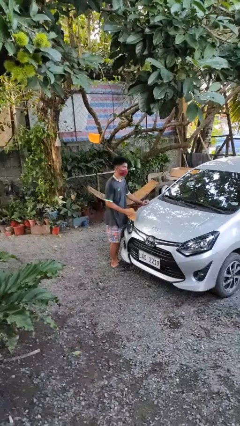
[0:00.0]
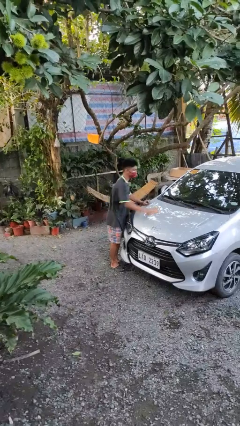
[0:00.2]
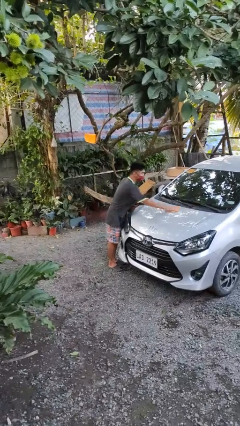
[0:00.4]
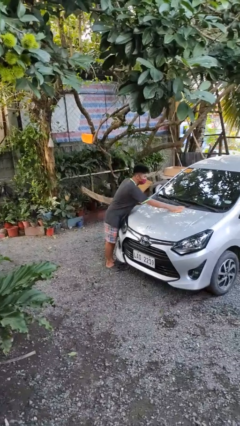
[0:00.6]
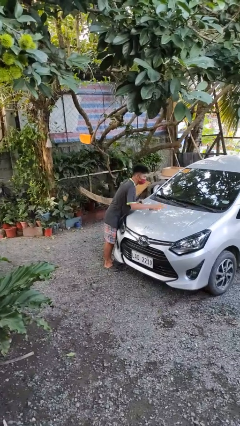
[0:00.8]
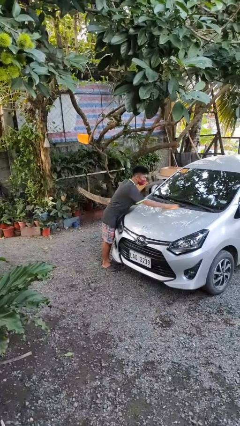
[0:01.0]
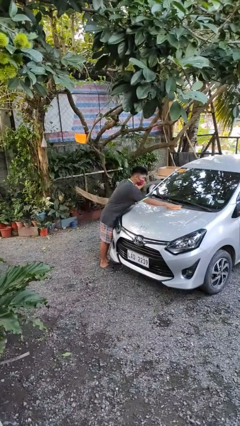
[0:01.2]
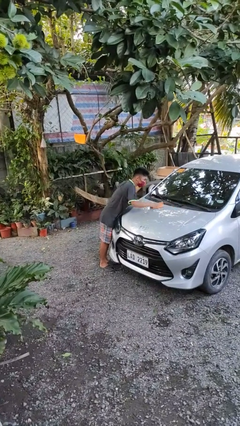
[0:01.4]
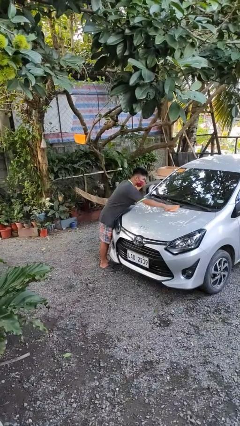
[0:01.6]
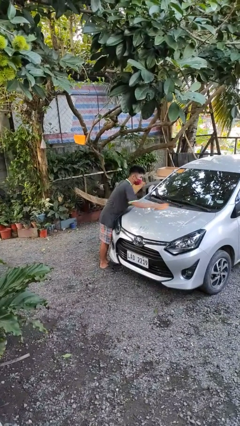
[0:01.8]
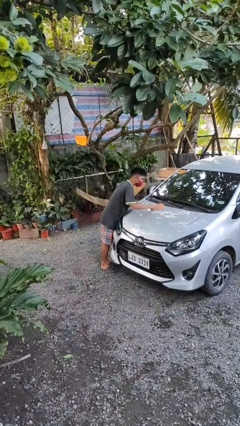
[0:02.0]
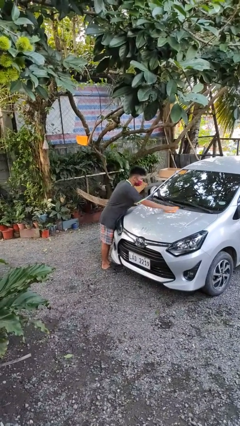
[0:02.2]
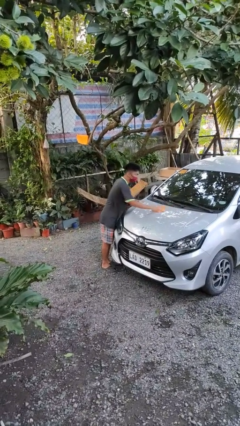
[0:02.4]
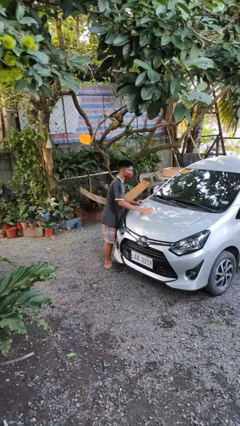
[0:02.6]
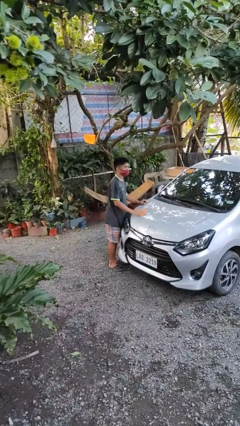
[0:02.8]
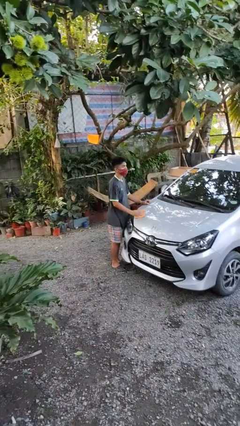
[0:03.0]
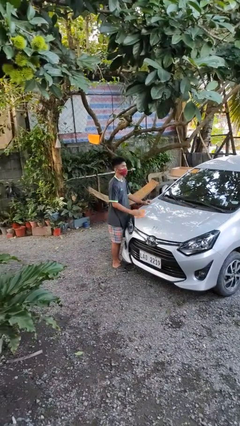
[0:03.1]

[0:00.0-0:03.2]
person polishes car with rag

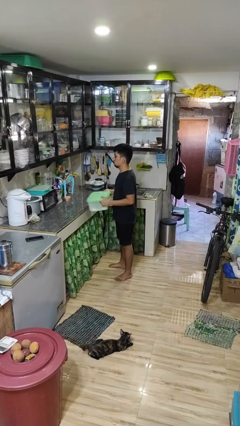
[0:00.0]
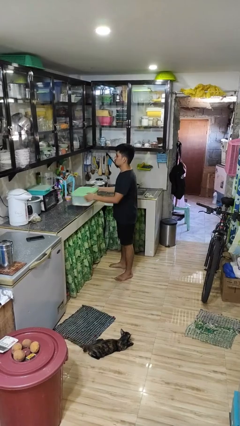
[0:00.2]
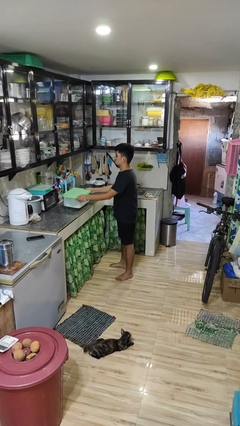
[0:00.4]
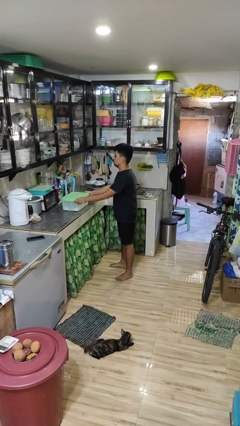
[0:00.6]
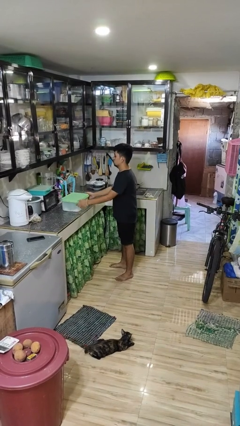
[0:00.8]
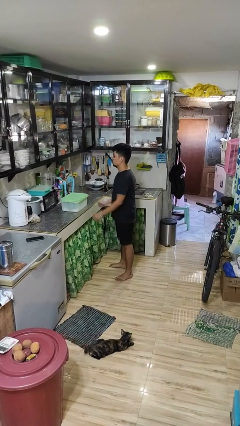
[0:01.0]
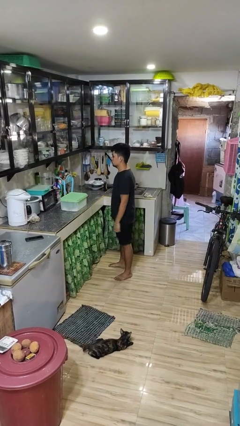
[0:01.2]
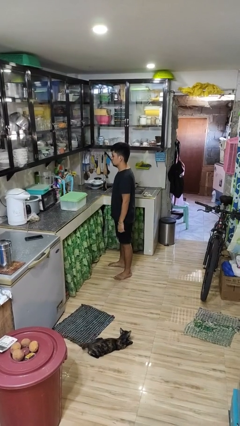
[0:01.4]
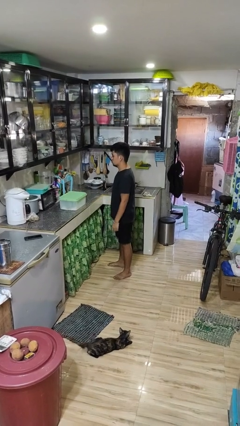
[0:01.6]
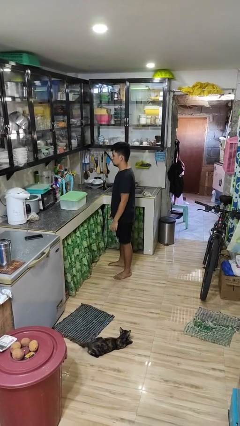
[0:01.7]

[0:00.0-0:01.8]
person puts down object on countertop

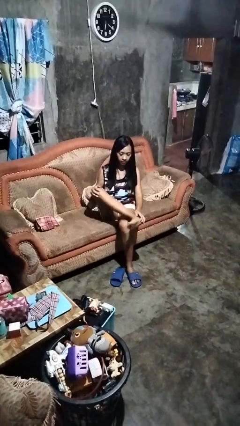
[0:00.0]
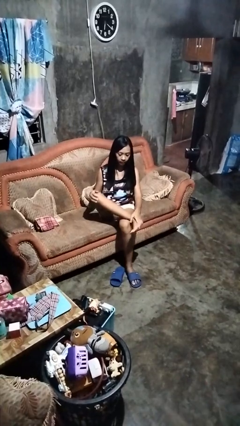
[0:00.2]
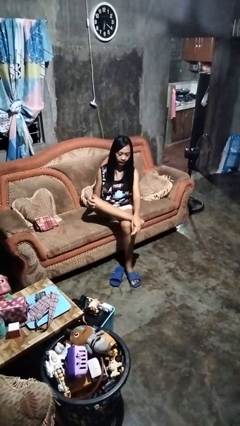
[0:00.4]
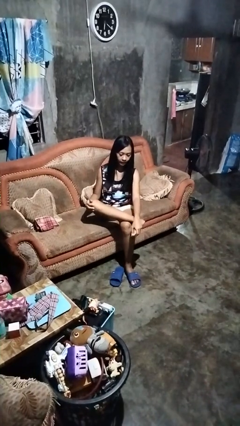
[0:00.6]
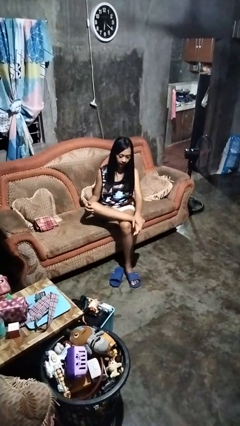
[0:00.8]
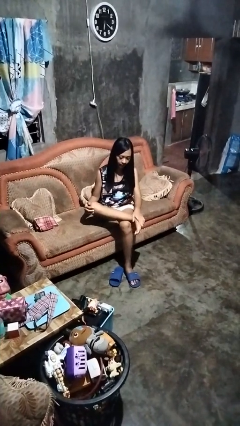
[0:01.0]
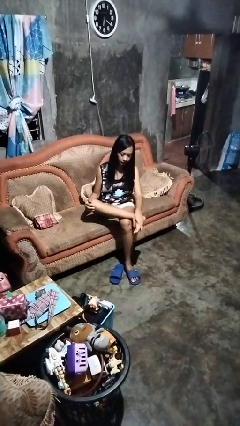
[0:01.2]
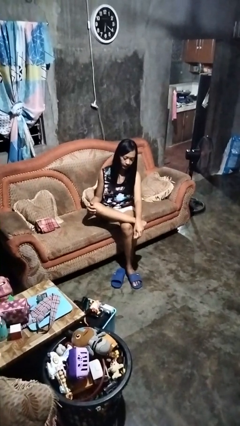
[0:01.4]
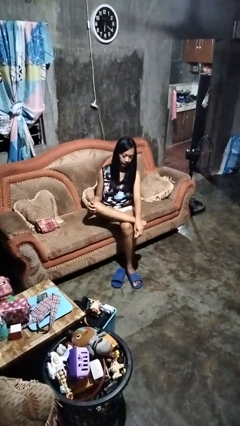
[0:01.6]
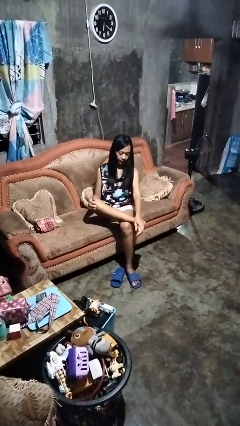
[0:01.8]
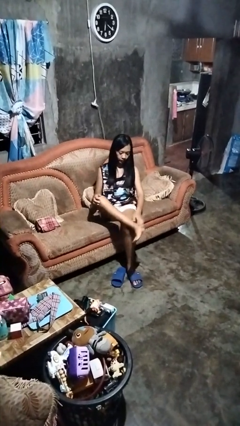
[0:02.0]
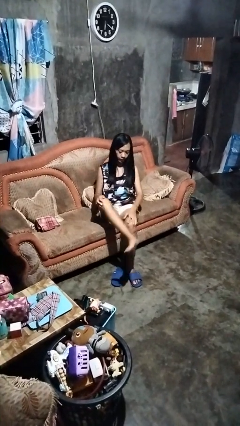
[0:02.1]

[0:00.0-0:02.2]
person rubs foot

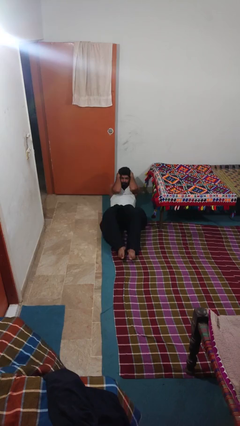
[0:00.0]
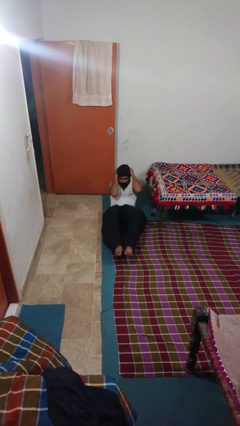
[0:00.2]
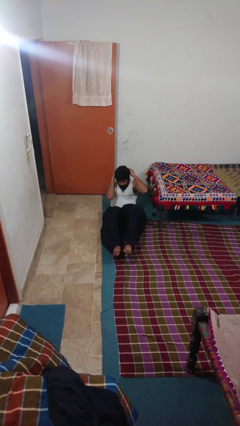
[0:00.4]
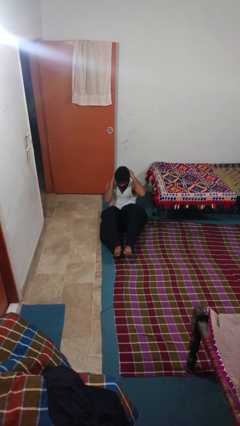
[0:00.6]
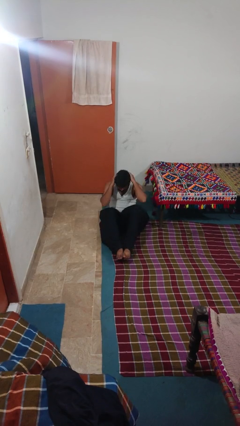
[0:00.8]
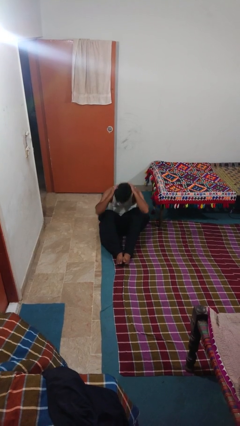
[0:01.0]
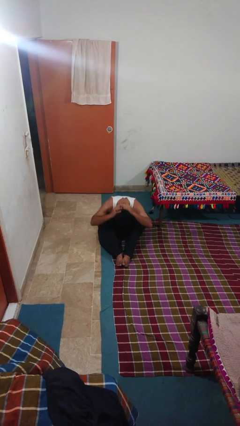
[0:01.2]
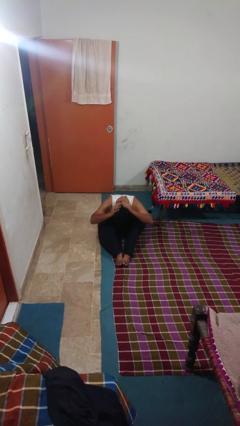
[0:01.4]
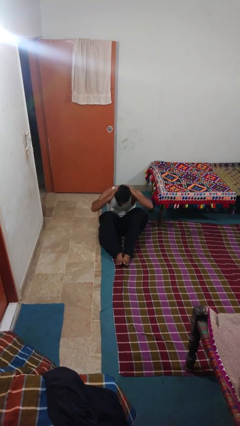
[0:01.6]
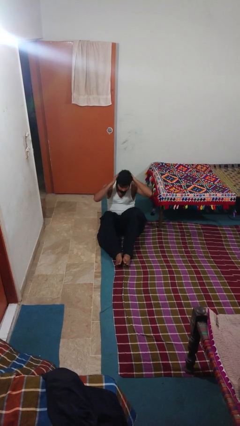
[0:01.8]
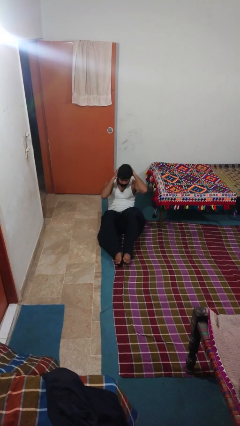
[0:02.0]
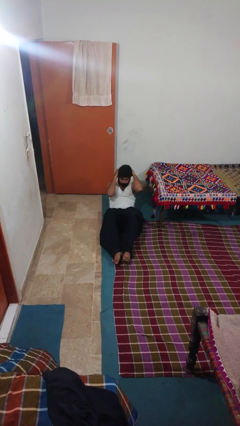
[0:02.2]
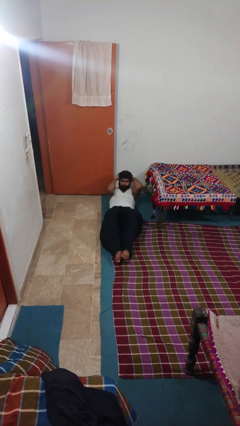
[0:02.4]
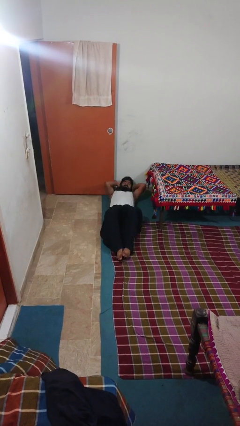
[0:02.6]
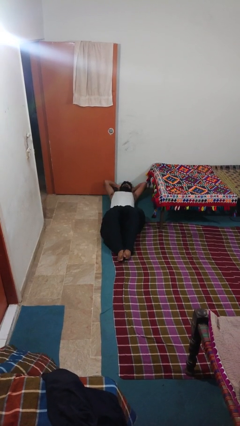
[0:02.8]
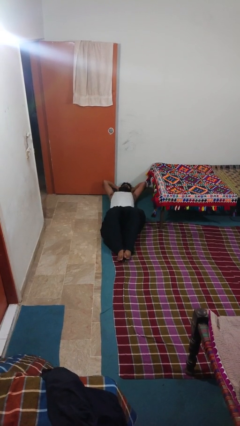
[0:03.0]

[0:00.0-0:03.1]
person exercises with situp

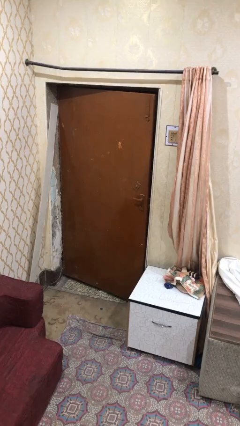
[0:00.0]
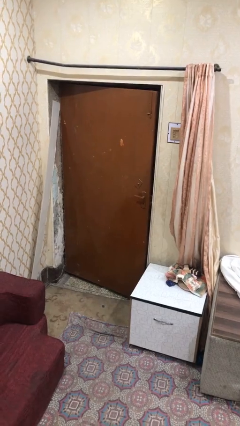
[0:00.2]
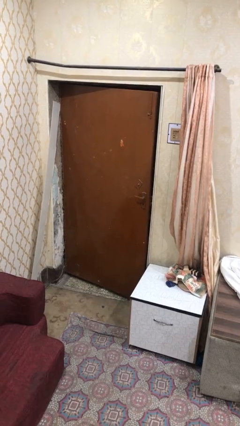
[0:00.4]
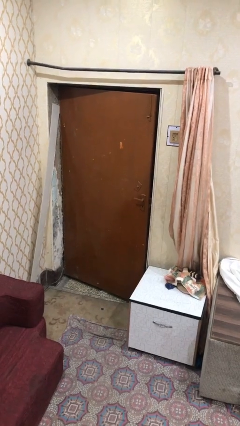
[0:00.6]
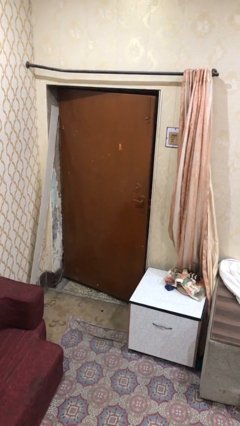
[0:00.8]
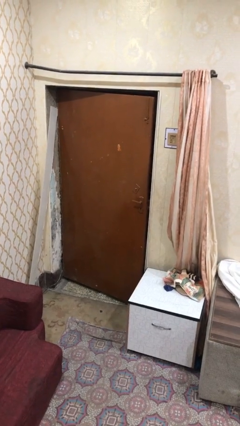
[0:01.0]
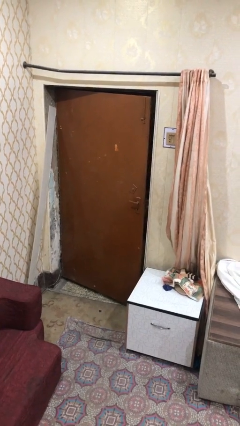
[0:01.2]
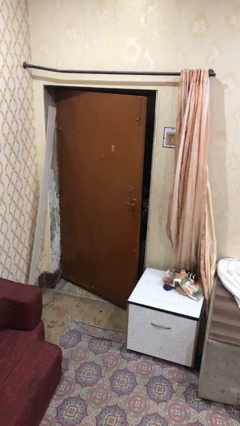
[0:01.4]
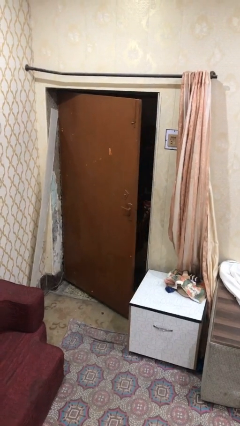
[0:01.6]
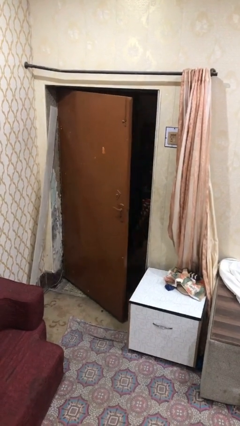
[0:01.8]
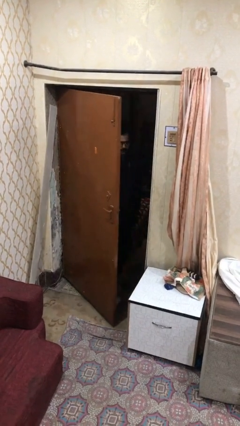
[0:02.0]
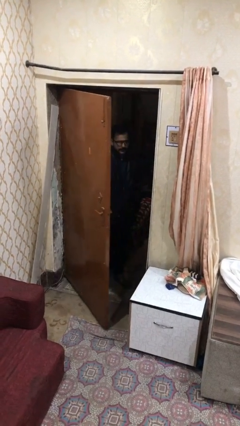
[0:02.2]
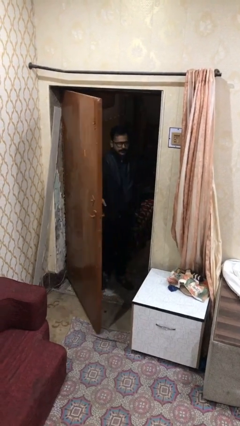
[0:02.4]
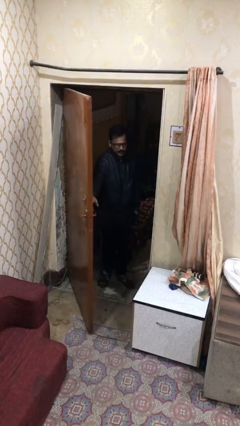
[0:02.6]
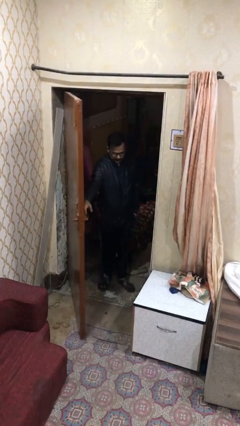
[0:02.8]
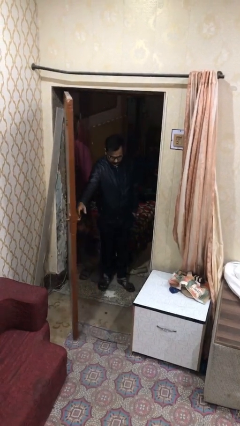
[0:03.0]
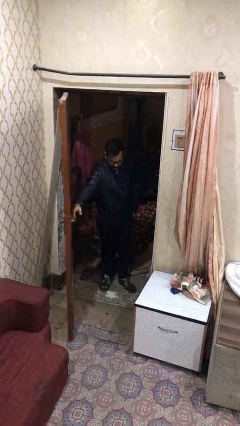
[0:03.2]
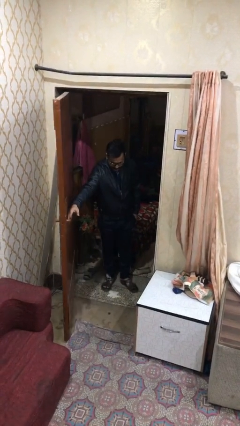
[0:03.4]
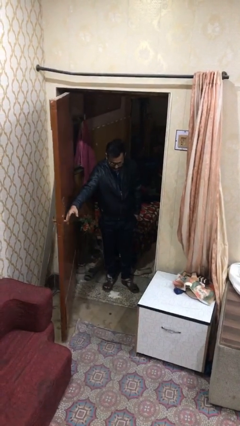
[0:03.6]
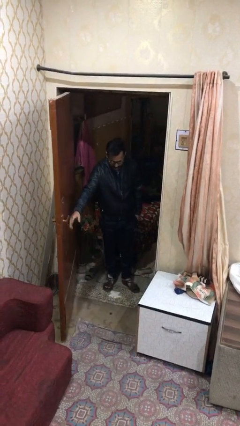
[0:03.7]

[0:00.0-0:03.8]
person opens facility door

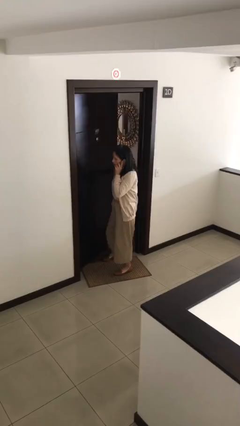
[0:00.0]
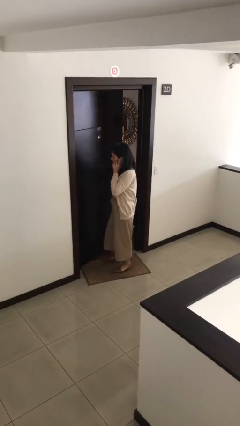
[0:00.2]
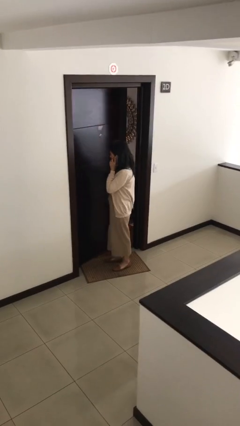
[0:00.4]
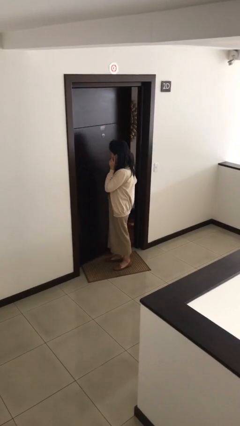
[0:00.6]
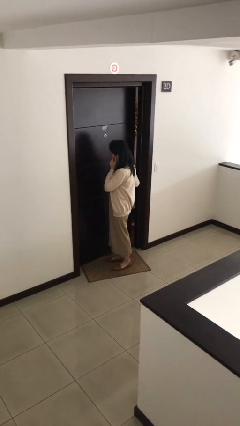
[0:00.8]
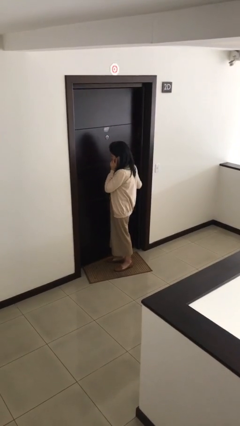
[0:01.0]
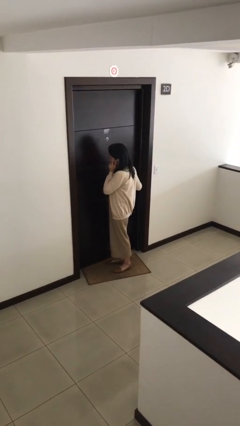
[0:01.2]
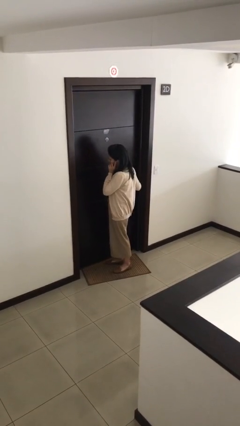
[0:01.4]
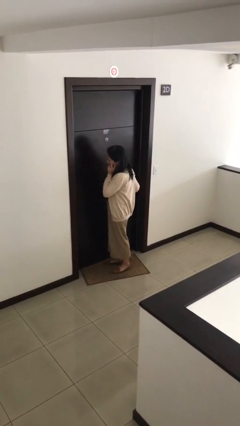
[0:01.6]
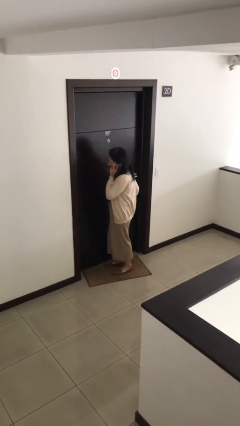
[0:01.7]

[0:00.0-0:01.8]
person closes facility door

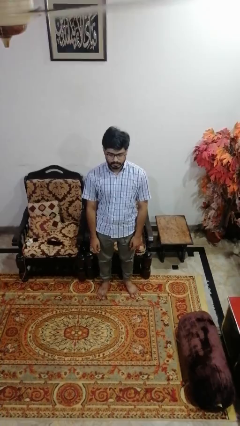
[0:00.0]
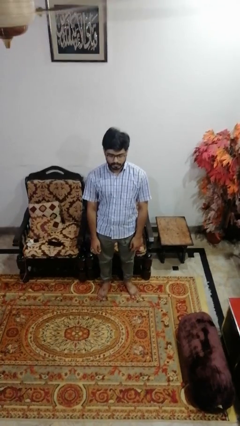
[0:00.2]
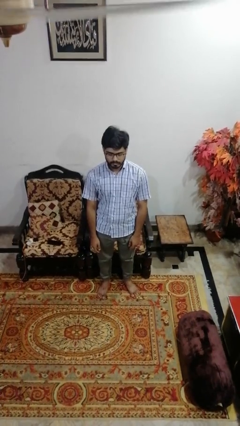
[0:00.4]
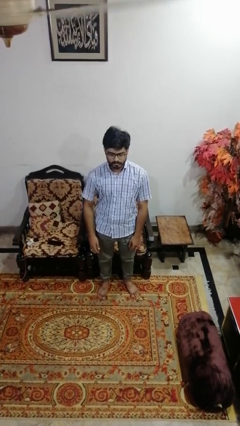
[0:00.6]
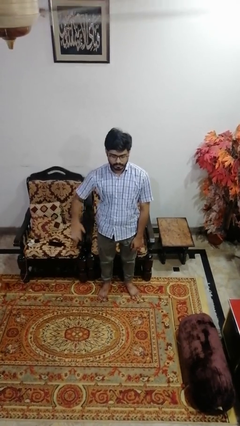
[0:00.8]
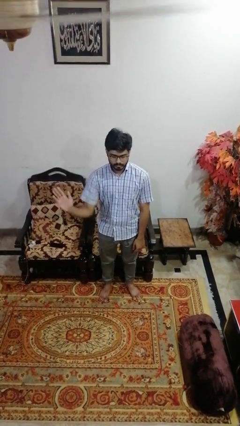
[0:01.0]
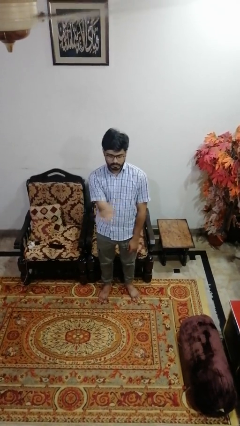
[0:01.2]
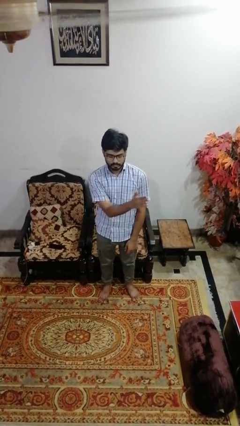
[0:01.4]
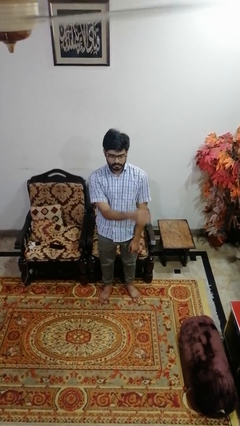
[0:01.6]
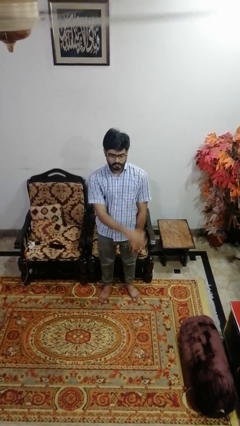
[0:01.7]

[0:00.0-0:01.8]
person gestures swipe left
